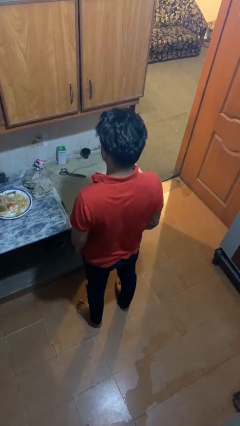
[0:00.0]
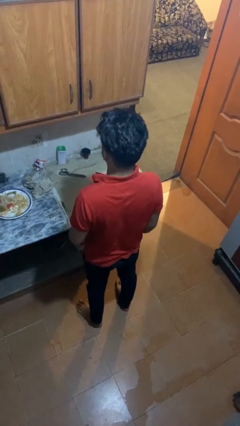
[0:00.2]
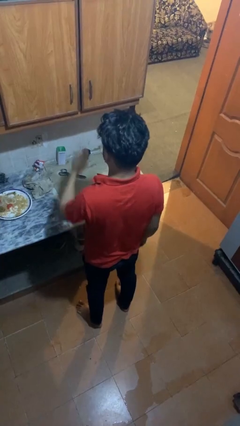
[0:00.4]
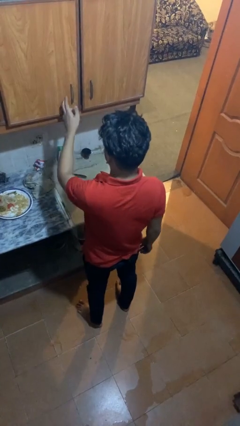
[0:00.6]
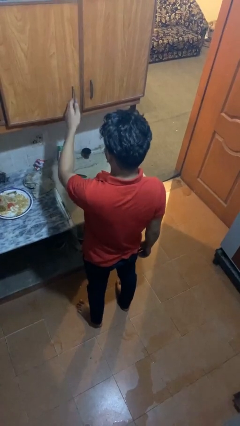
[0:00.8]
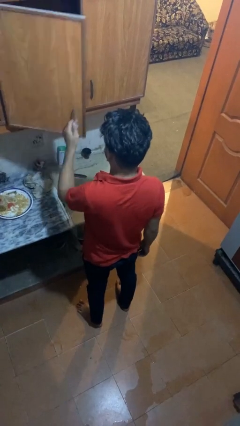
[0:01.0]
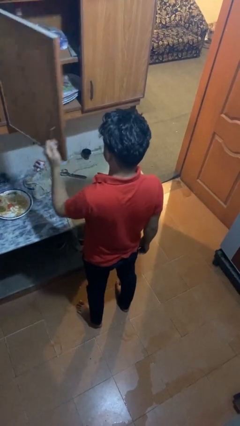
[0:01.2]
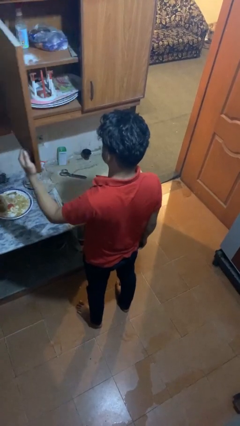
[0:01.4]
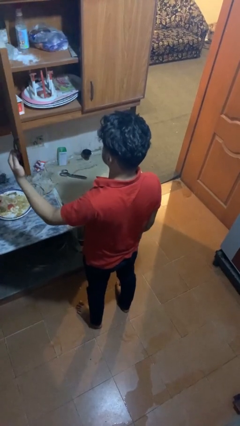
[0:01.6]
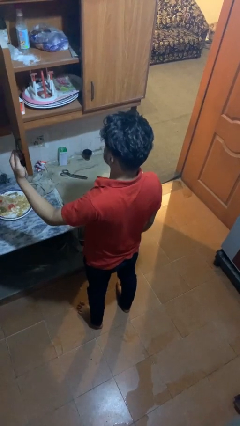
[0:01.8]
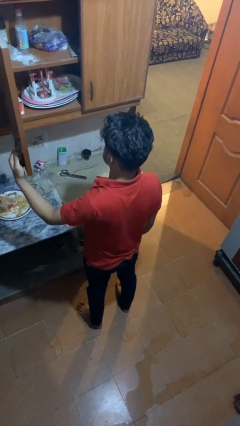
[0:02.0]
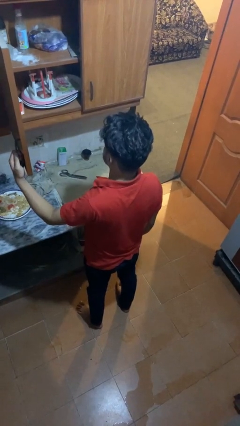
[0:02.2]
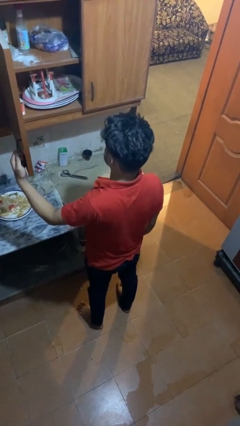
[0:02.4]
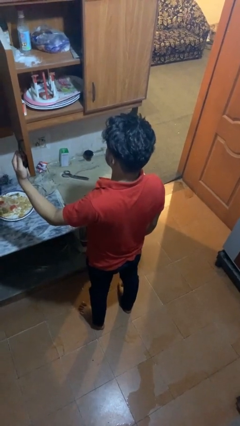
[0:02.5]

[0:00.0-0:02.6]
person opens cabinet

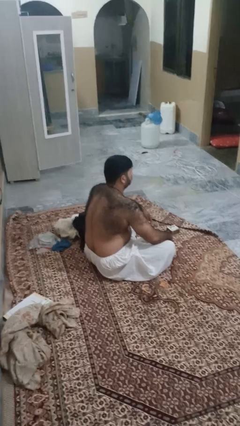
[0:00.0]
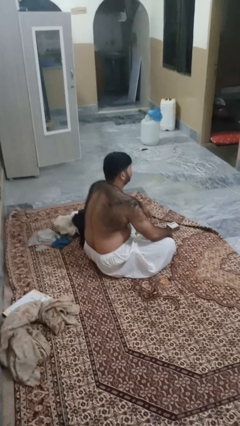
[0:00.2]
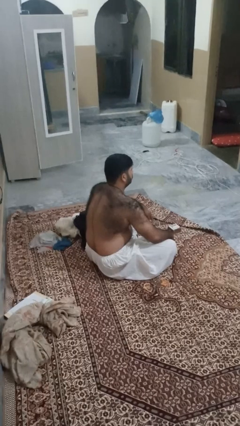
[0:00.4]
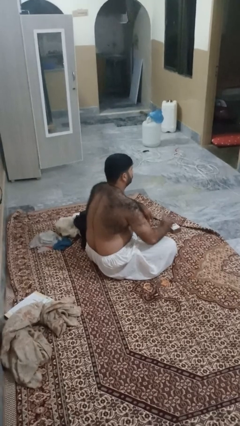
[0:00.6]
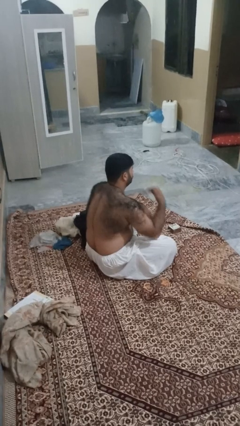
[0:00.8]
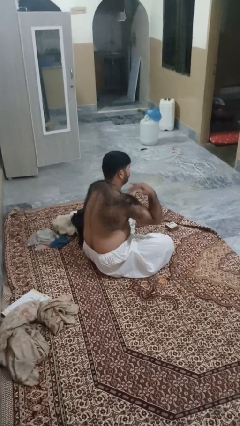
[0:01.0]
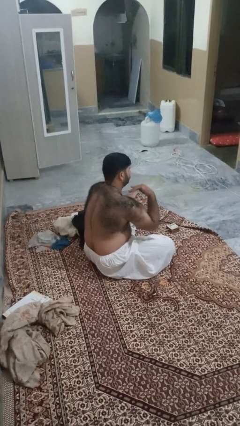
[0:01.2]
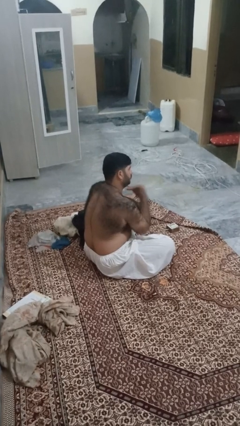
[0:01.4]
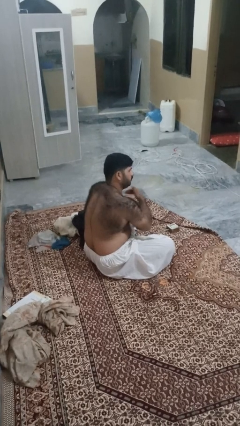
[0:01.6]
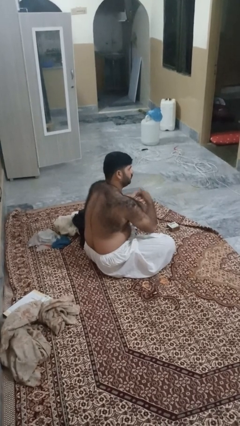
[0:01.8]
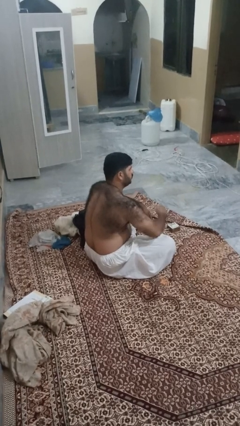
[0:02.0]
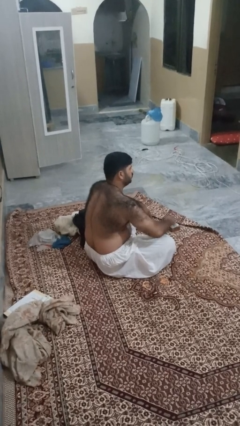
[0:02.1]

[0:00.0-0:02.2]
person gestures cut

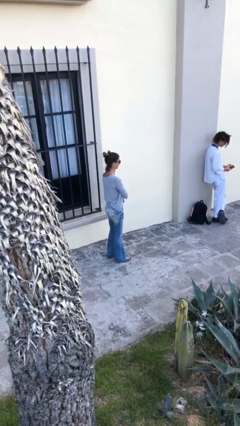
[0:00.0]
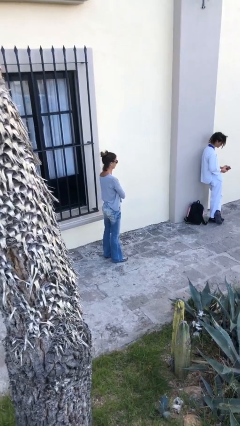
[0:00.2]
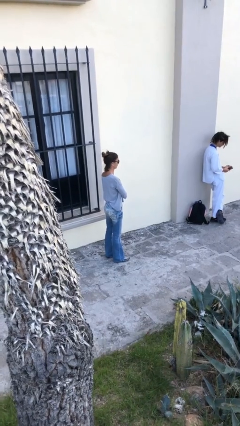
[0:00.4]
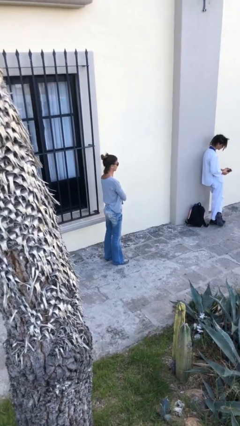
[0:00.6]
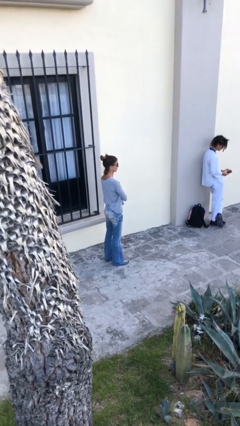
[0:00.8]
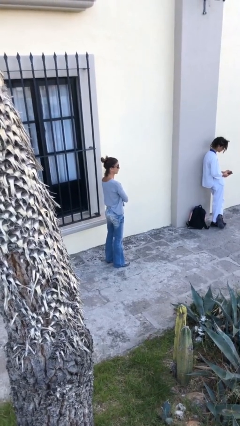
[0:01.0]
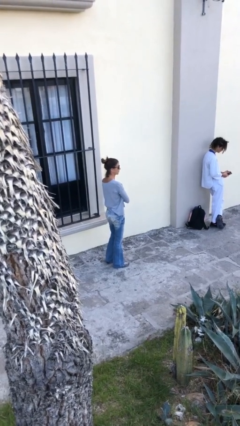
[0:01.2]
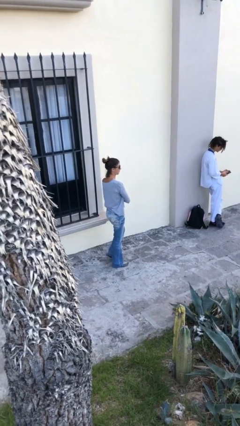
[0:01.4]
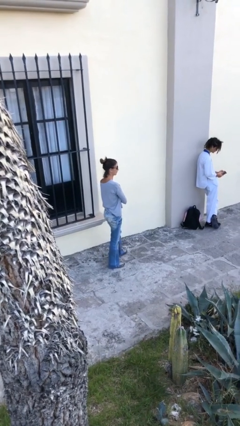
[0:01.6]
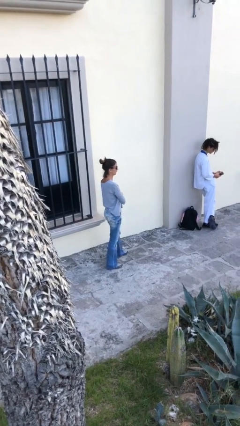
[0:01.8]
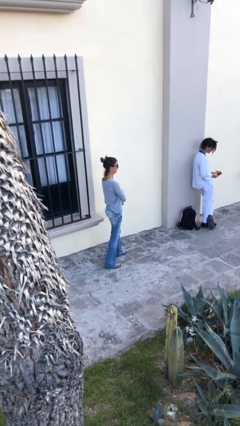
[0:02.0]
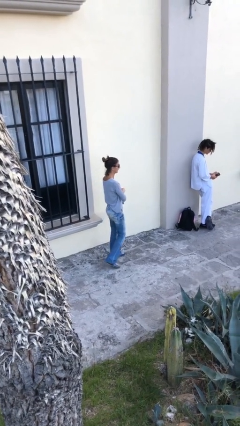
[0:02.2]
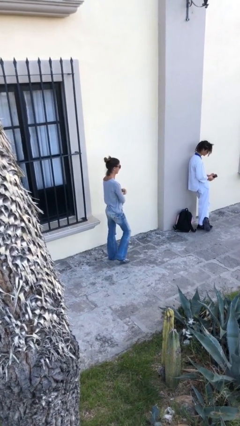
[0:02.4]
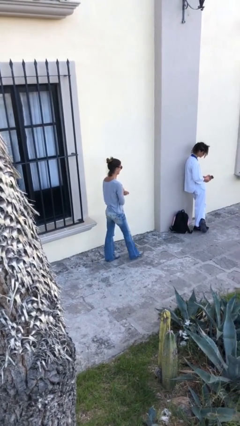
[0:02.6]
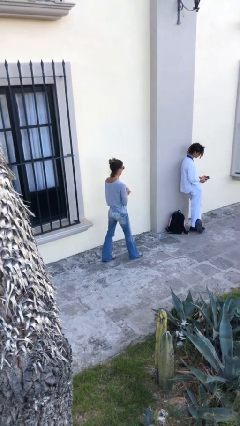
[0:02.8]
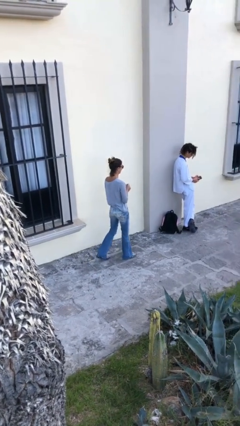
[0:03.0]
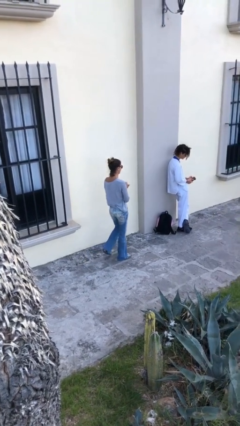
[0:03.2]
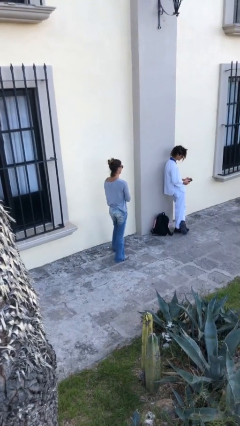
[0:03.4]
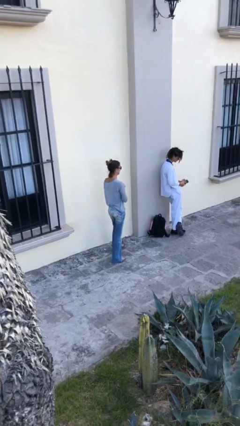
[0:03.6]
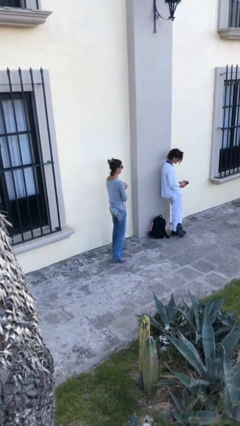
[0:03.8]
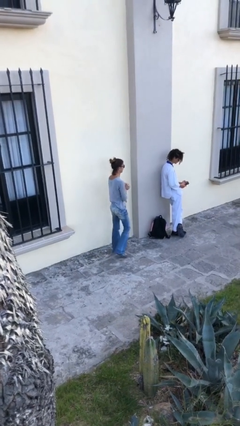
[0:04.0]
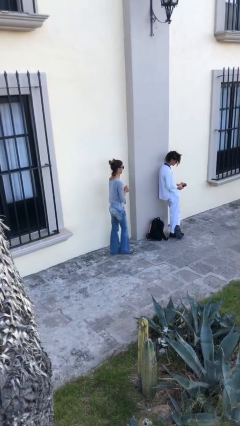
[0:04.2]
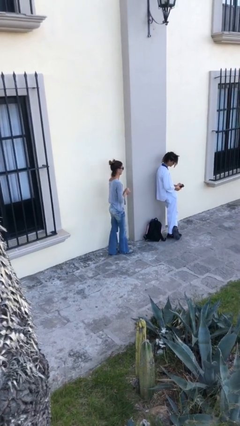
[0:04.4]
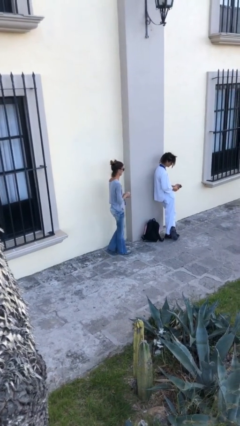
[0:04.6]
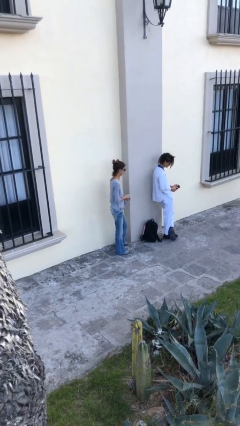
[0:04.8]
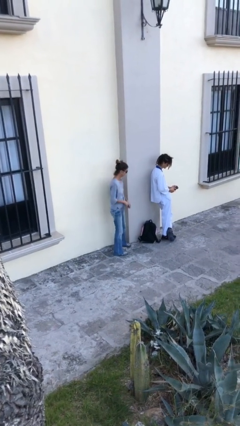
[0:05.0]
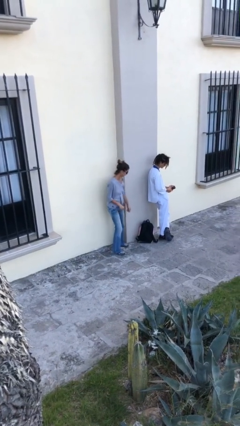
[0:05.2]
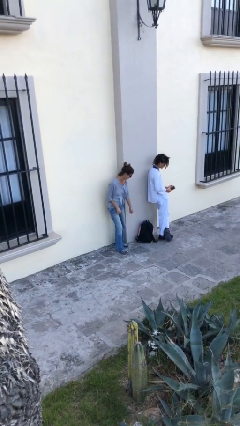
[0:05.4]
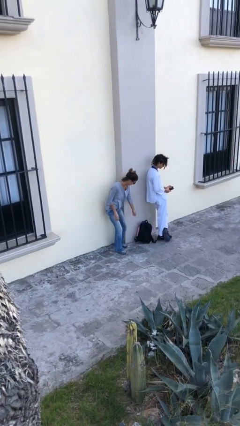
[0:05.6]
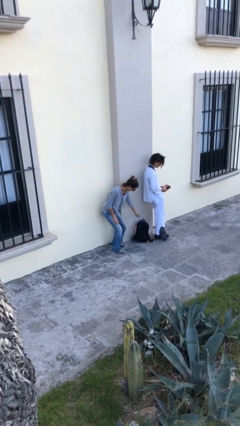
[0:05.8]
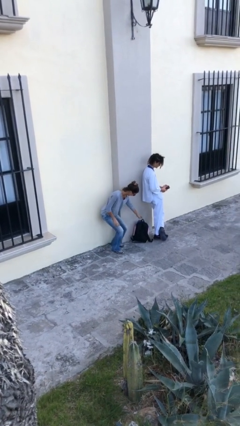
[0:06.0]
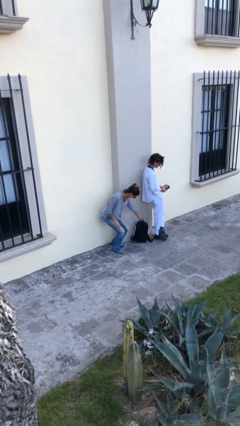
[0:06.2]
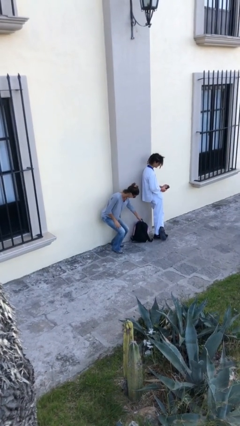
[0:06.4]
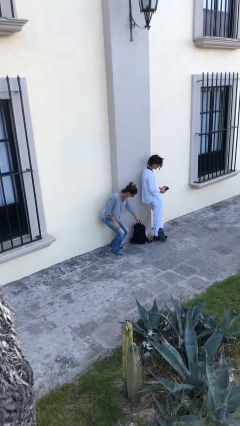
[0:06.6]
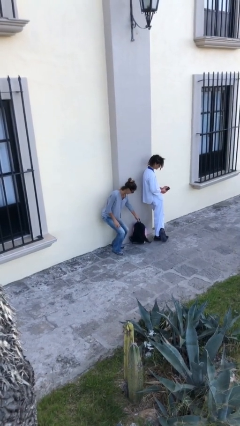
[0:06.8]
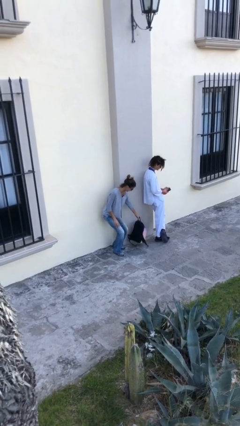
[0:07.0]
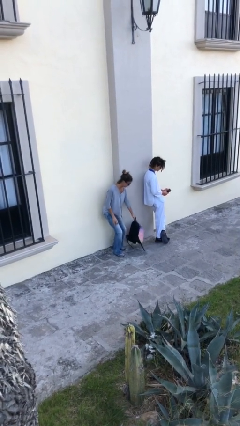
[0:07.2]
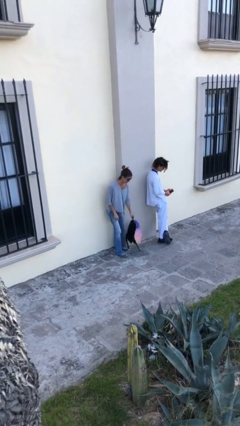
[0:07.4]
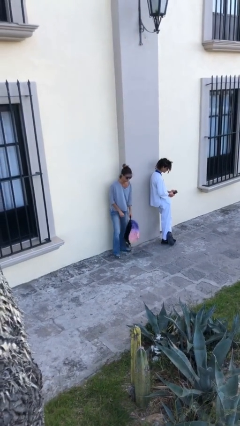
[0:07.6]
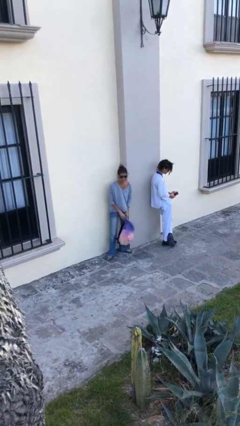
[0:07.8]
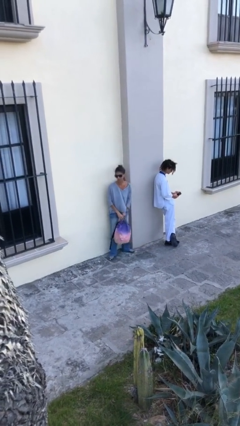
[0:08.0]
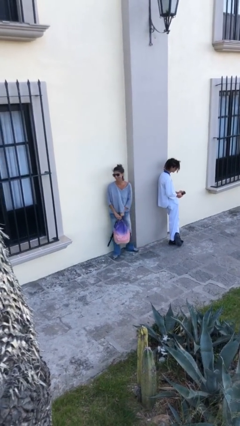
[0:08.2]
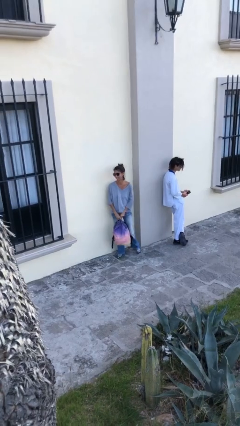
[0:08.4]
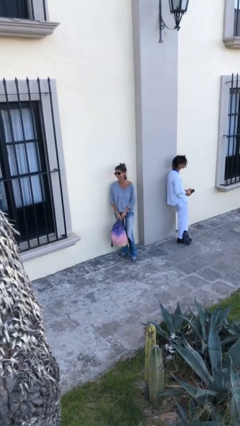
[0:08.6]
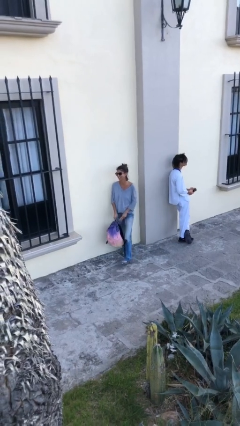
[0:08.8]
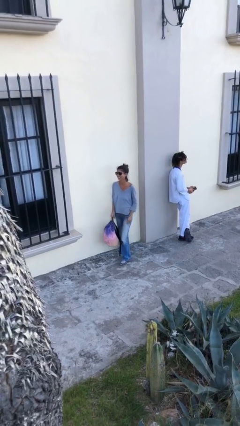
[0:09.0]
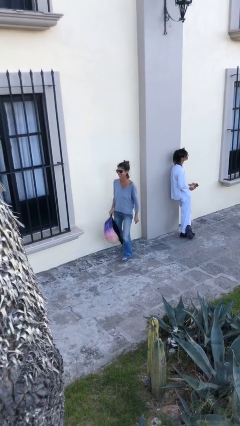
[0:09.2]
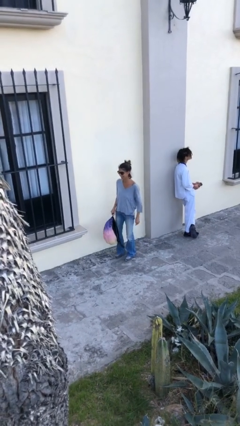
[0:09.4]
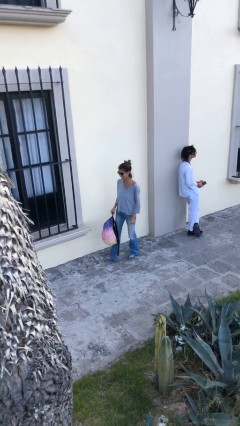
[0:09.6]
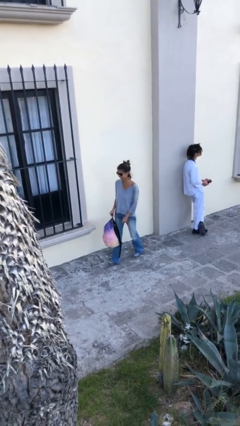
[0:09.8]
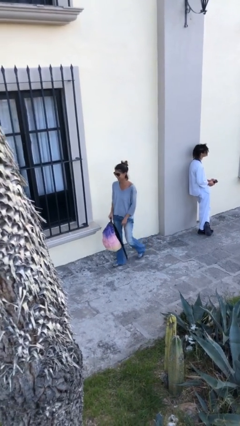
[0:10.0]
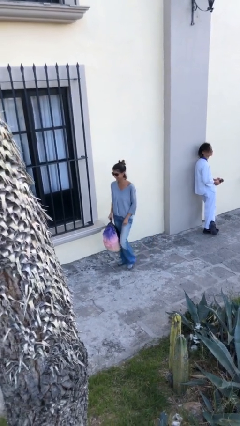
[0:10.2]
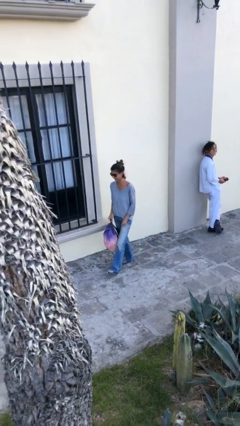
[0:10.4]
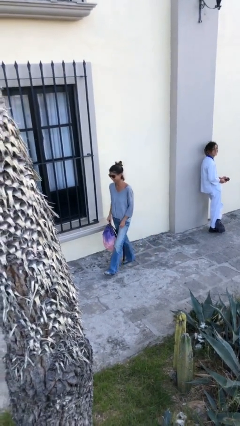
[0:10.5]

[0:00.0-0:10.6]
person steals object from person

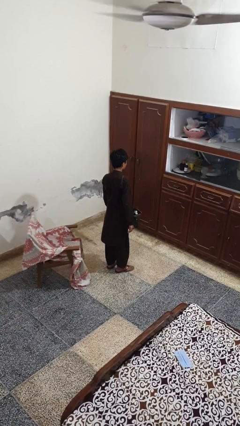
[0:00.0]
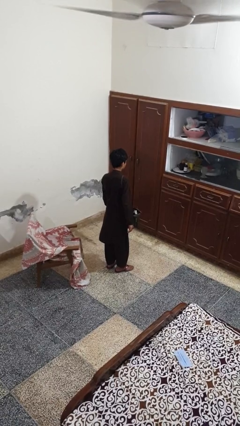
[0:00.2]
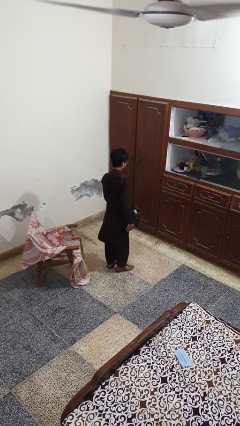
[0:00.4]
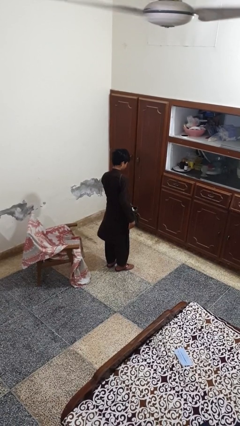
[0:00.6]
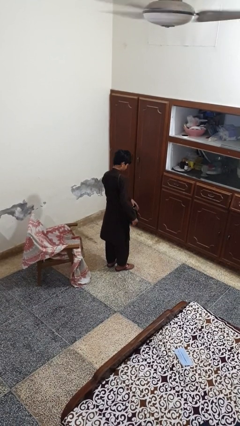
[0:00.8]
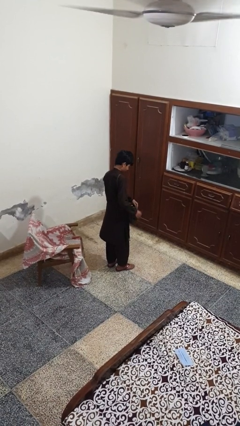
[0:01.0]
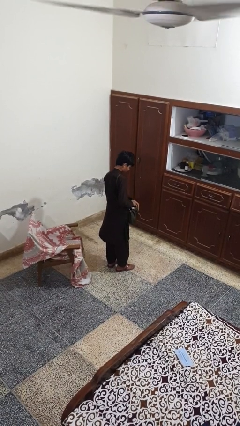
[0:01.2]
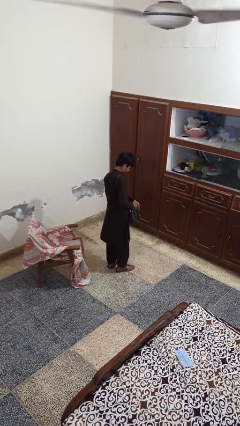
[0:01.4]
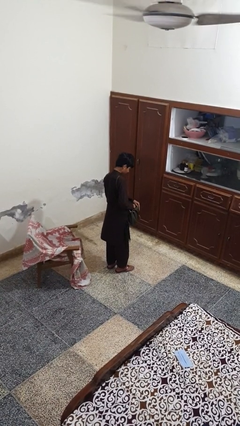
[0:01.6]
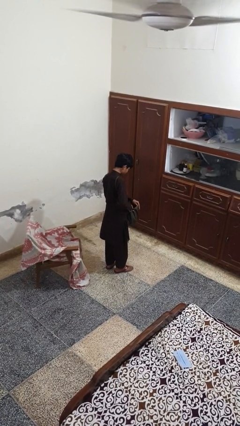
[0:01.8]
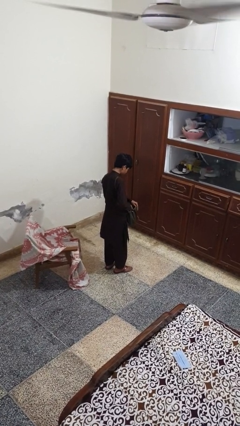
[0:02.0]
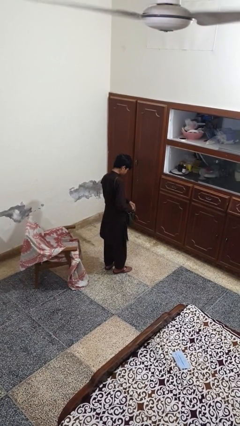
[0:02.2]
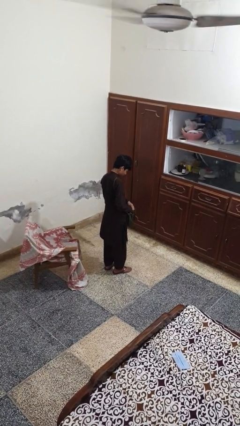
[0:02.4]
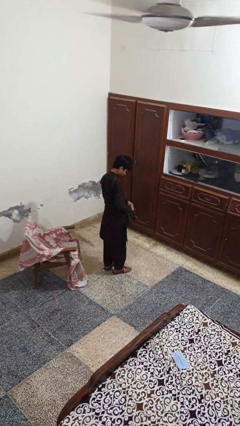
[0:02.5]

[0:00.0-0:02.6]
person searches in purse
